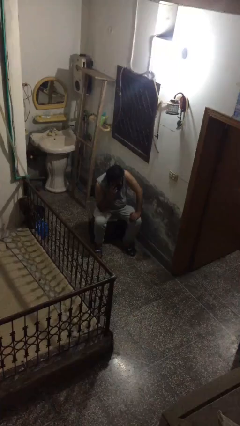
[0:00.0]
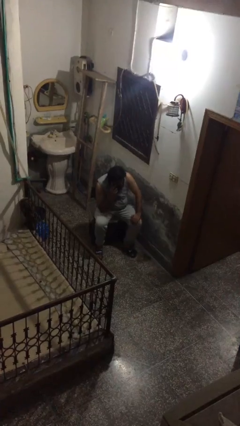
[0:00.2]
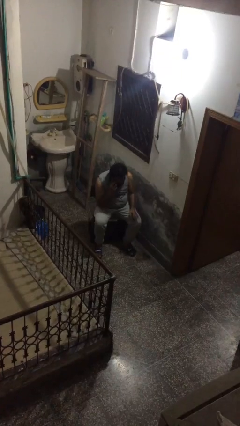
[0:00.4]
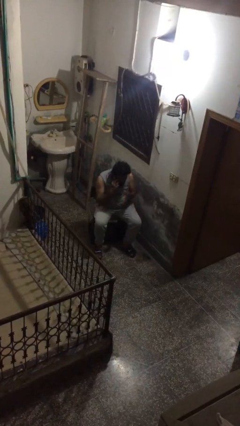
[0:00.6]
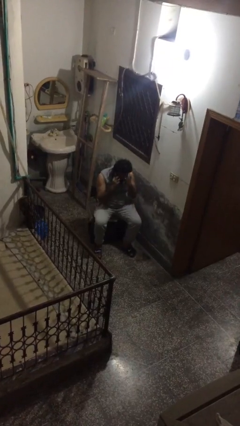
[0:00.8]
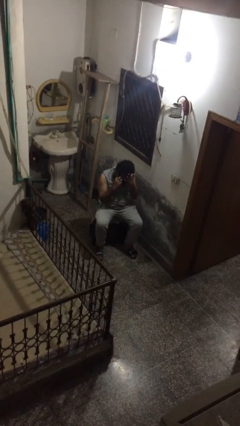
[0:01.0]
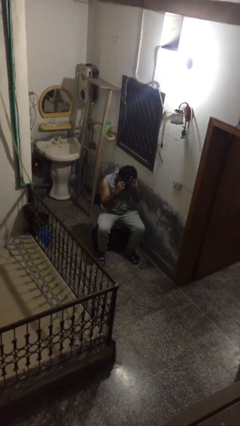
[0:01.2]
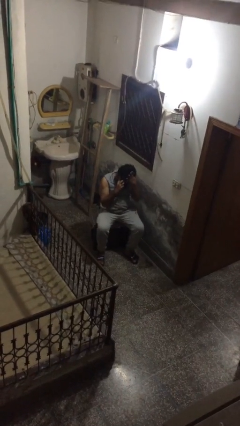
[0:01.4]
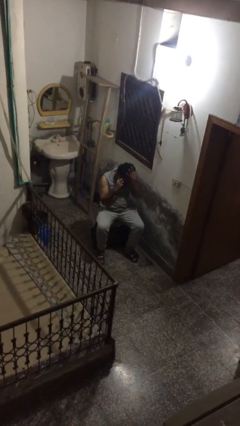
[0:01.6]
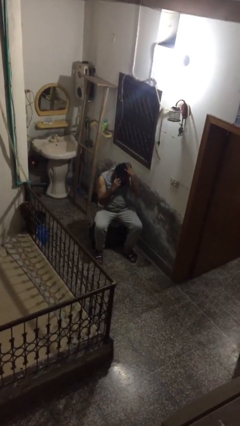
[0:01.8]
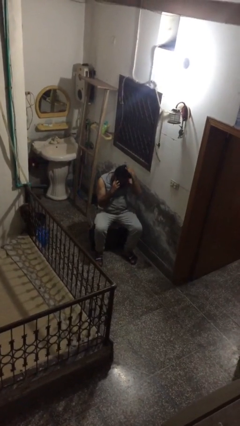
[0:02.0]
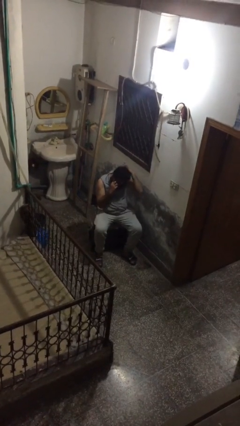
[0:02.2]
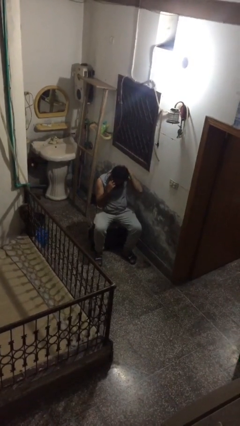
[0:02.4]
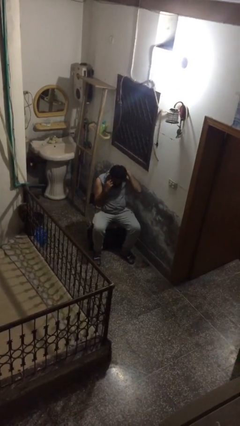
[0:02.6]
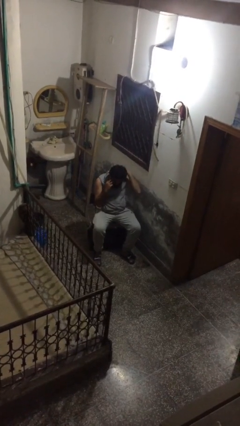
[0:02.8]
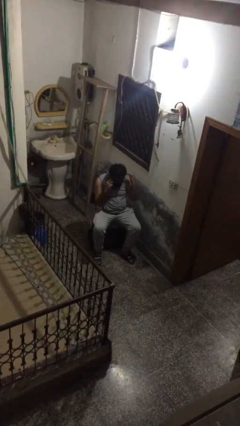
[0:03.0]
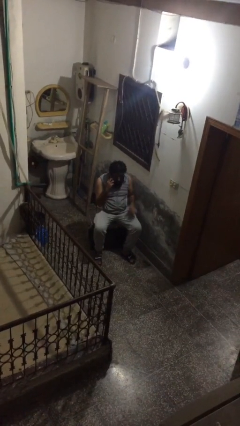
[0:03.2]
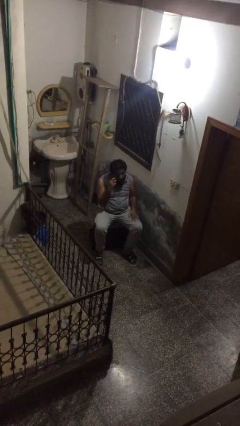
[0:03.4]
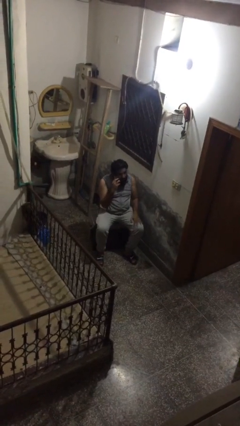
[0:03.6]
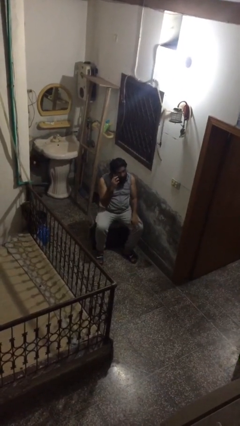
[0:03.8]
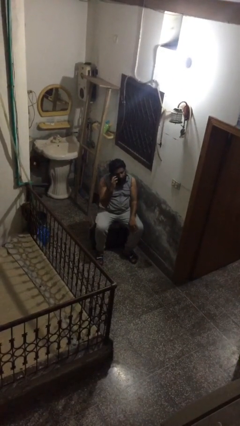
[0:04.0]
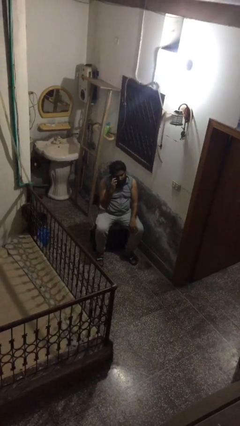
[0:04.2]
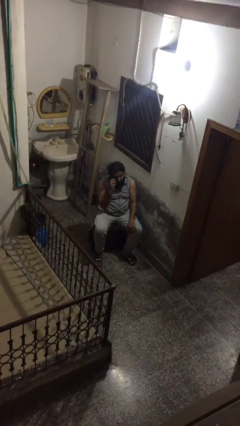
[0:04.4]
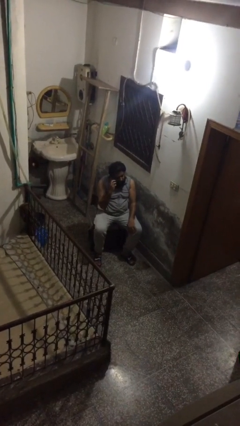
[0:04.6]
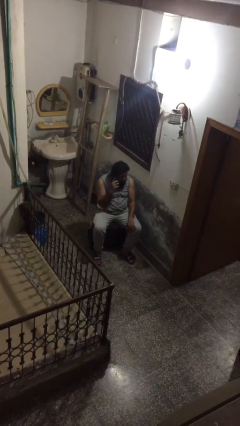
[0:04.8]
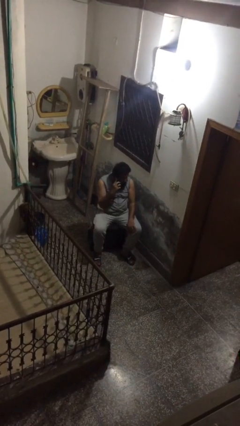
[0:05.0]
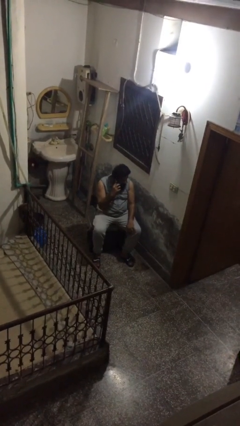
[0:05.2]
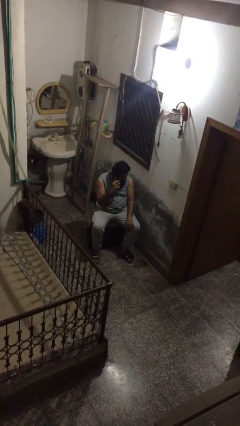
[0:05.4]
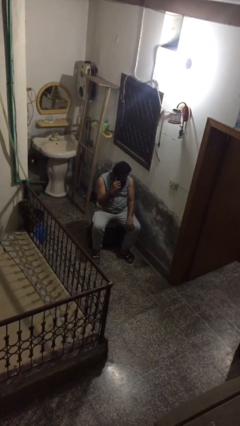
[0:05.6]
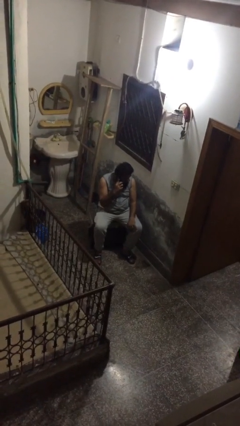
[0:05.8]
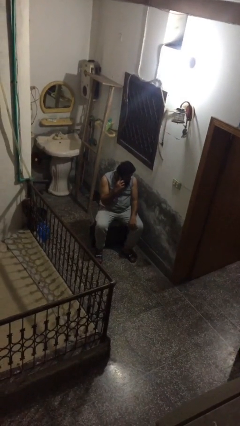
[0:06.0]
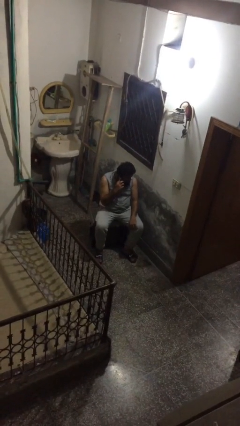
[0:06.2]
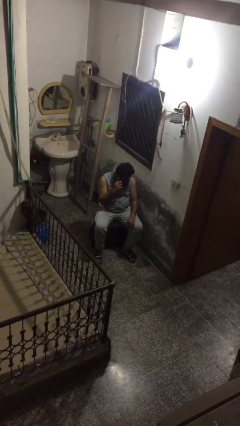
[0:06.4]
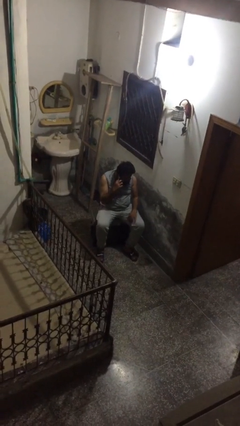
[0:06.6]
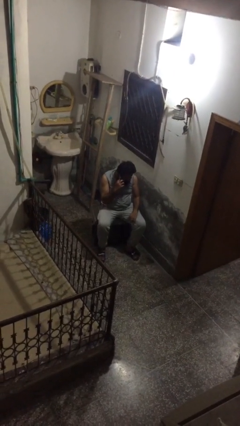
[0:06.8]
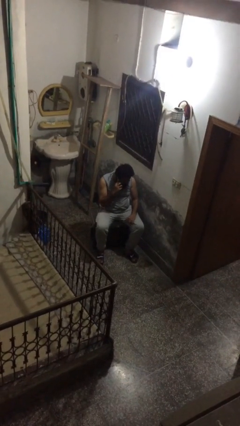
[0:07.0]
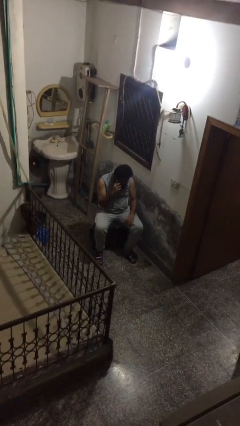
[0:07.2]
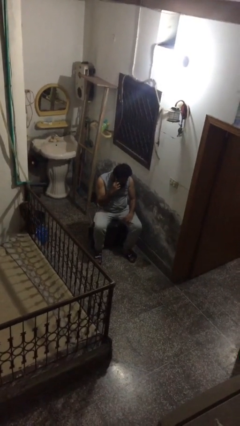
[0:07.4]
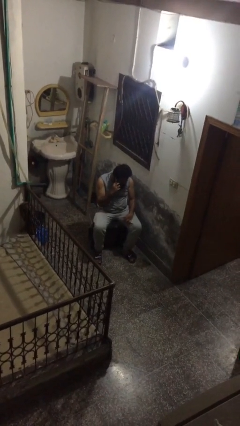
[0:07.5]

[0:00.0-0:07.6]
person talks on phone

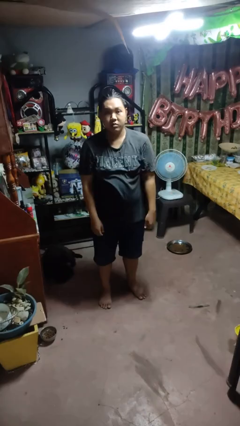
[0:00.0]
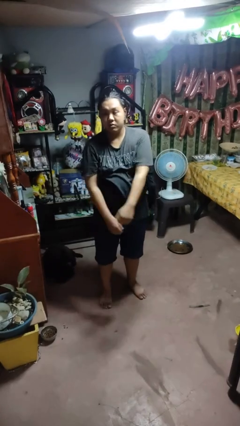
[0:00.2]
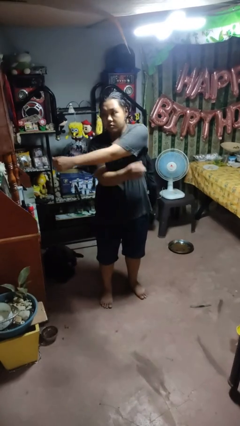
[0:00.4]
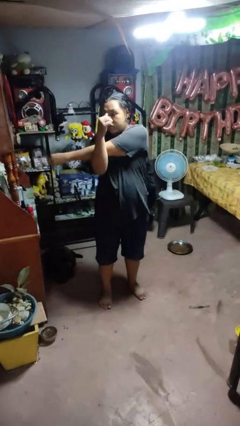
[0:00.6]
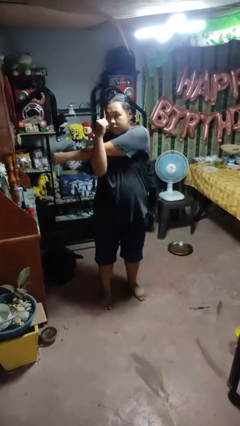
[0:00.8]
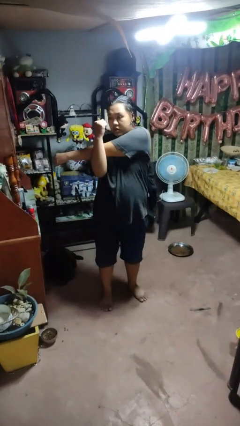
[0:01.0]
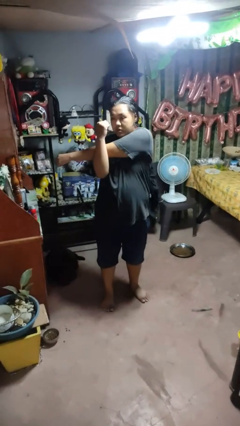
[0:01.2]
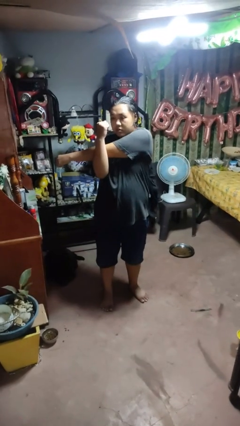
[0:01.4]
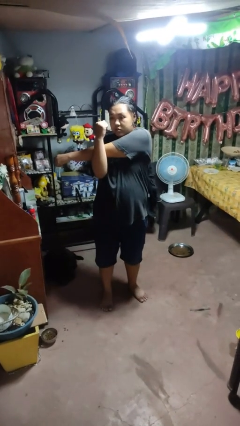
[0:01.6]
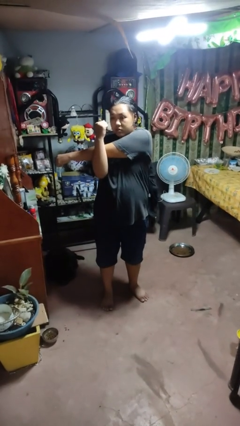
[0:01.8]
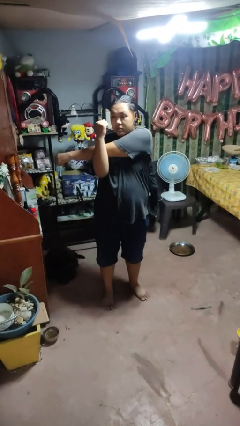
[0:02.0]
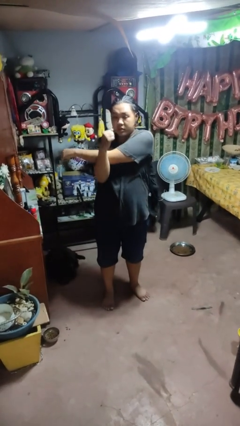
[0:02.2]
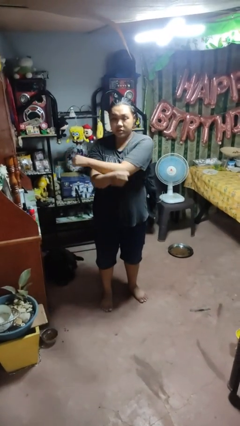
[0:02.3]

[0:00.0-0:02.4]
person crosses arms

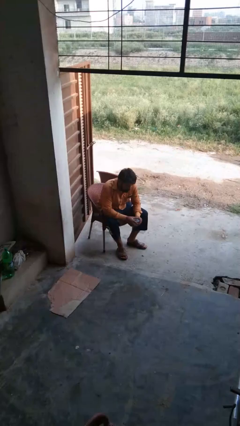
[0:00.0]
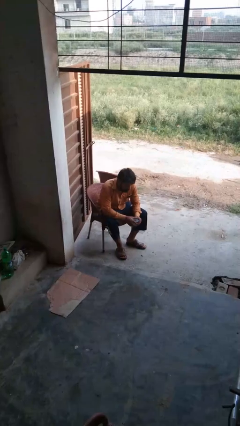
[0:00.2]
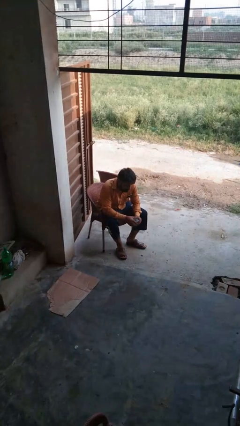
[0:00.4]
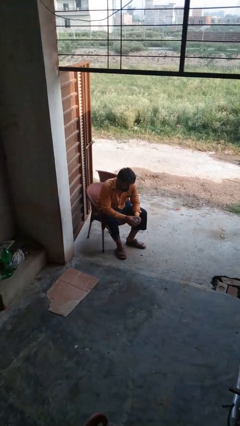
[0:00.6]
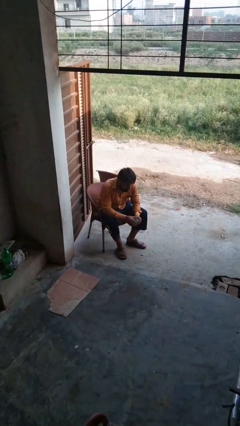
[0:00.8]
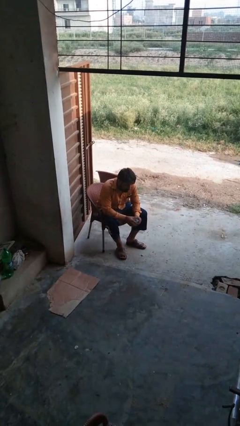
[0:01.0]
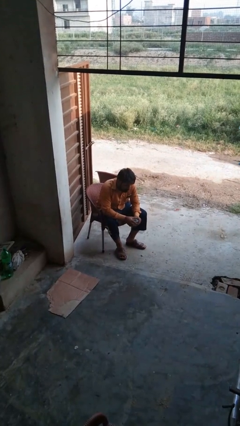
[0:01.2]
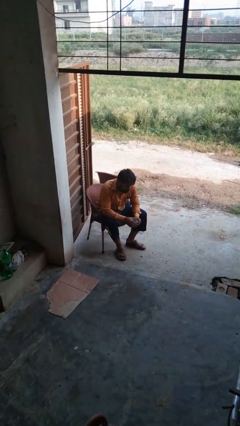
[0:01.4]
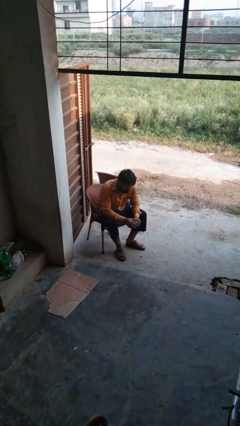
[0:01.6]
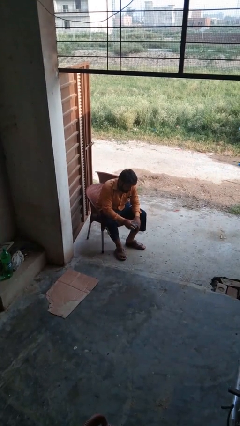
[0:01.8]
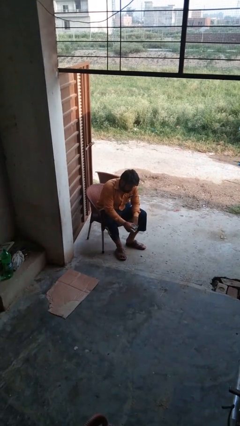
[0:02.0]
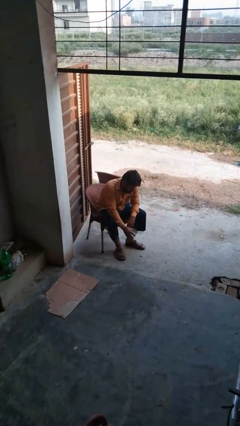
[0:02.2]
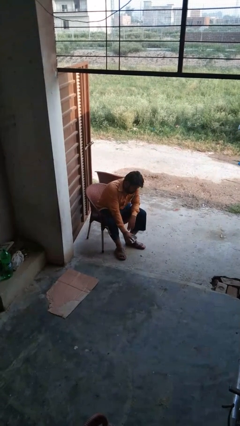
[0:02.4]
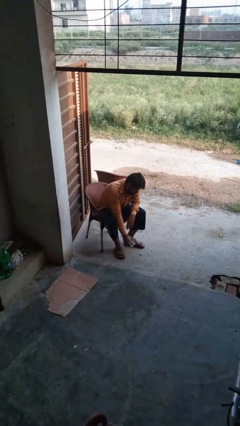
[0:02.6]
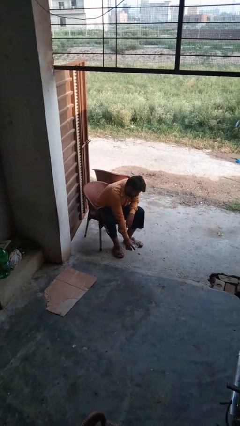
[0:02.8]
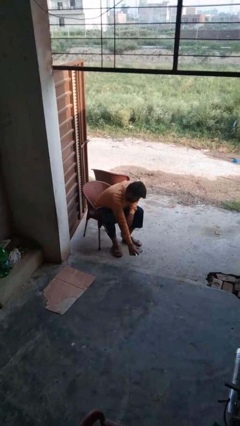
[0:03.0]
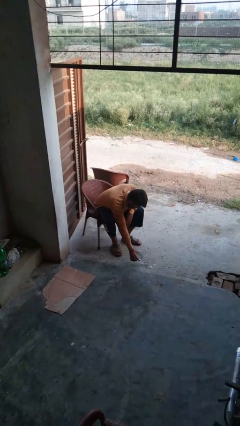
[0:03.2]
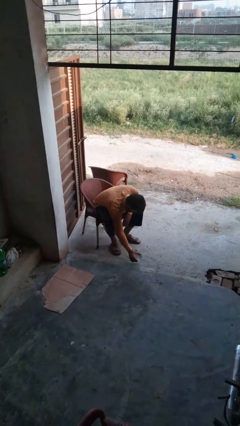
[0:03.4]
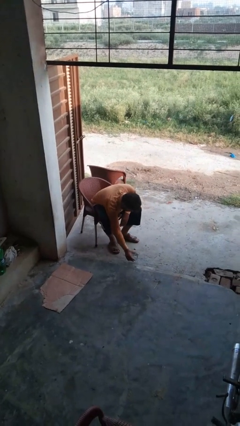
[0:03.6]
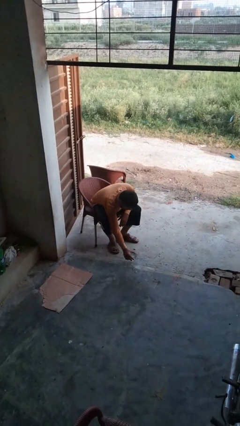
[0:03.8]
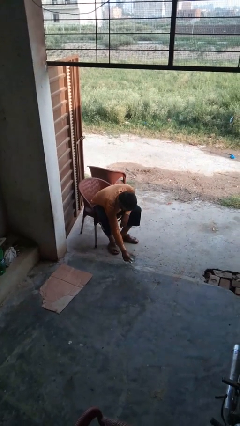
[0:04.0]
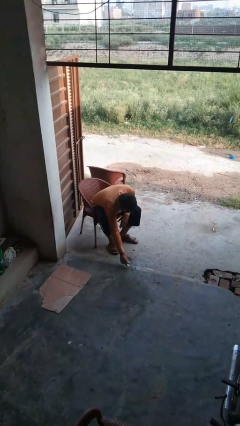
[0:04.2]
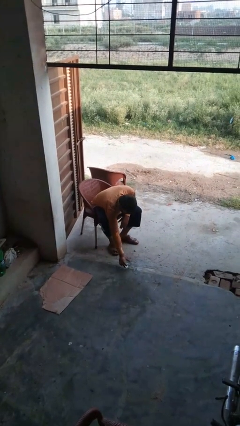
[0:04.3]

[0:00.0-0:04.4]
person spills on floor

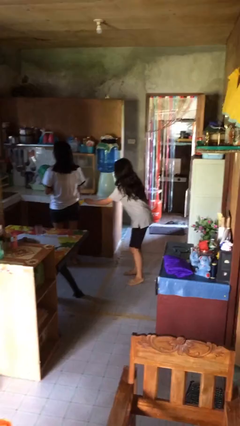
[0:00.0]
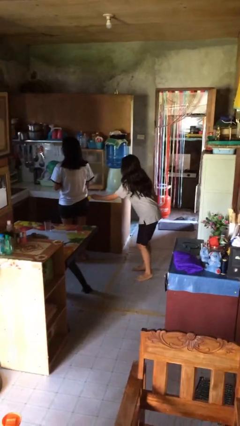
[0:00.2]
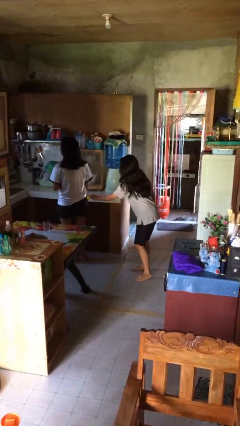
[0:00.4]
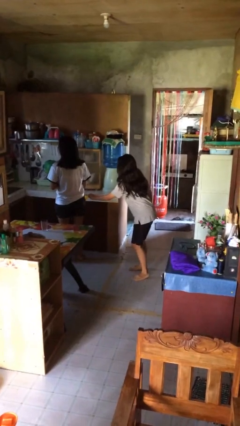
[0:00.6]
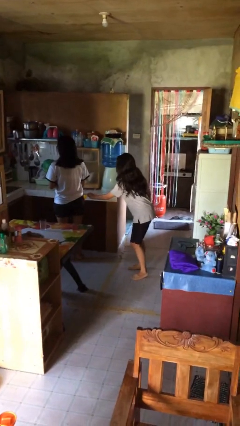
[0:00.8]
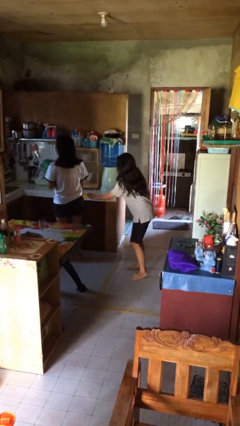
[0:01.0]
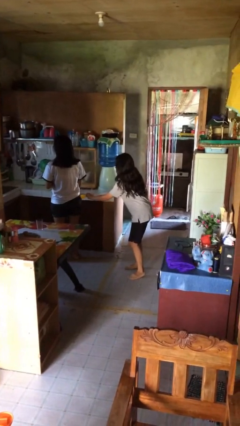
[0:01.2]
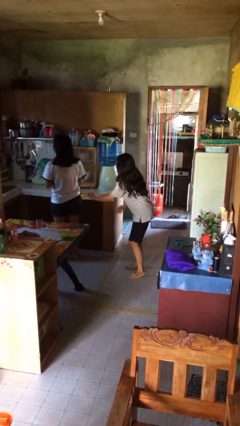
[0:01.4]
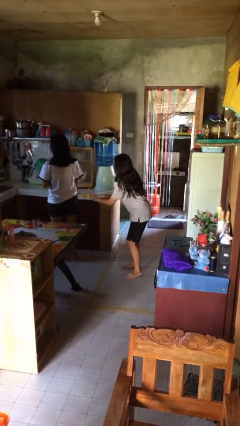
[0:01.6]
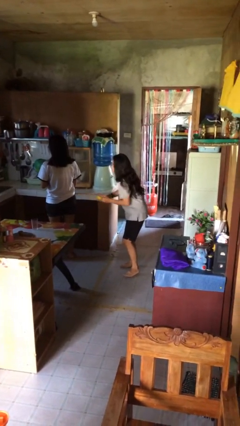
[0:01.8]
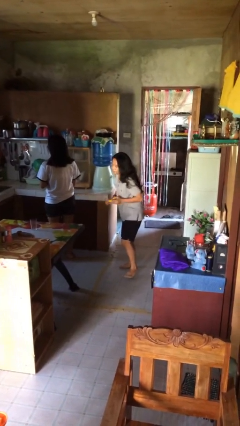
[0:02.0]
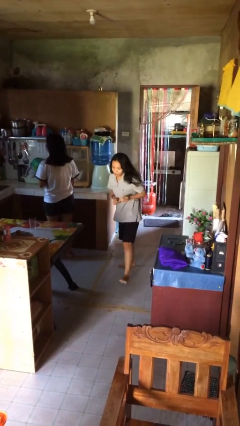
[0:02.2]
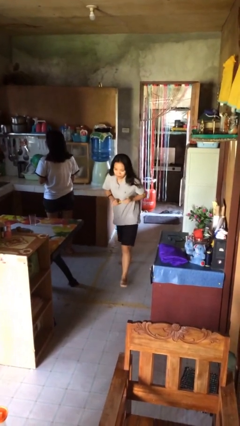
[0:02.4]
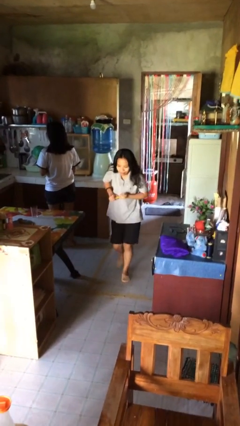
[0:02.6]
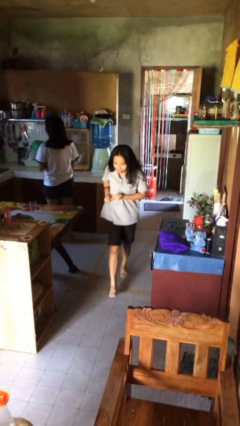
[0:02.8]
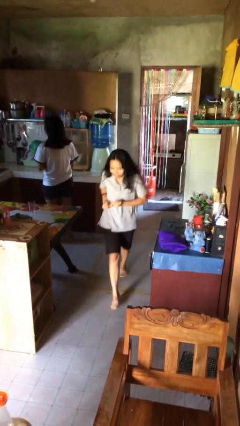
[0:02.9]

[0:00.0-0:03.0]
person steals object from person

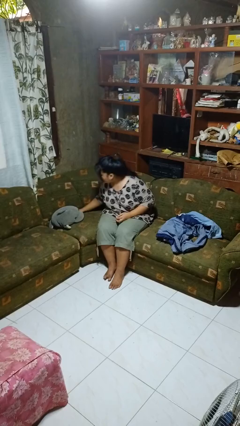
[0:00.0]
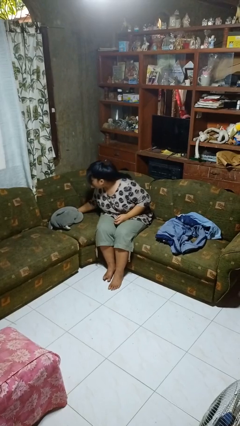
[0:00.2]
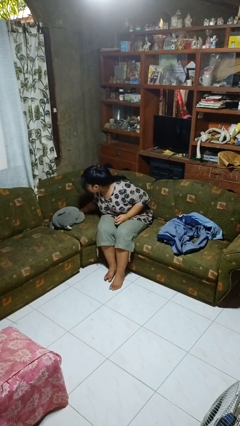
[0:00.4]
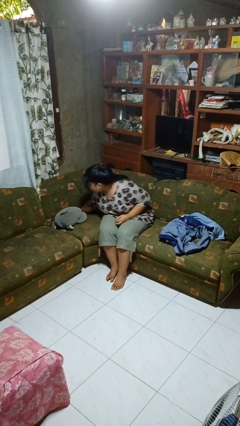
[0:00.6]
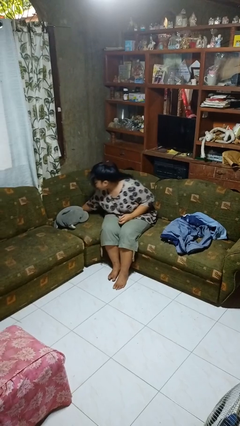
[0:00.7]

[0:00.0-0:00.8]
person searches in couch
